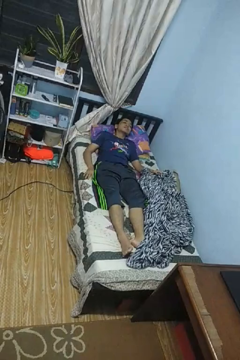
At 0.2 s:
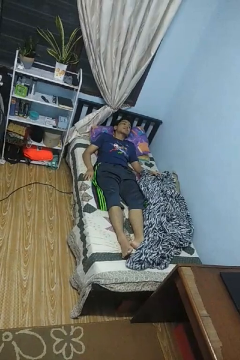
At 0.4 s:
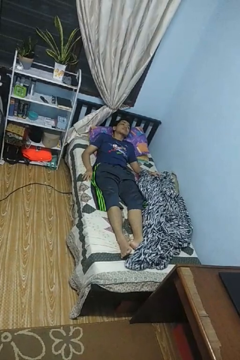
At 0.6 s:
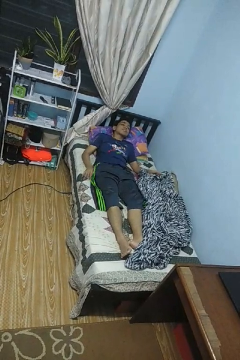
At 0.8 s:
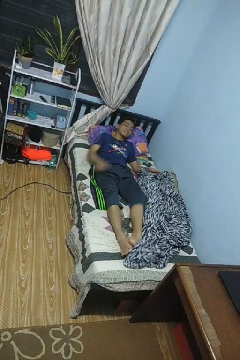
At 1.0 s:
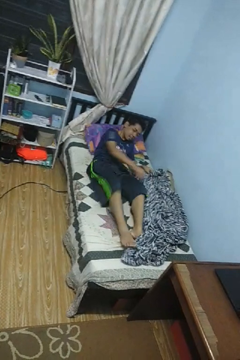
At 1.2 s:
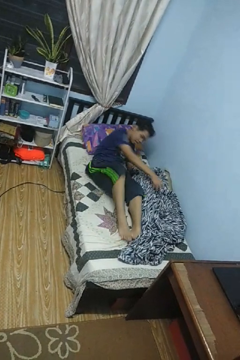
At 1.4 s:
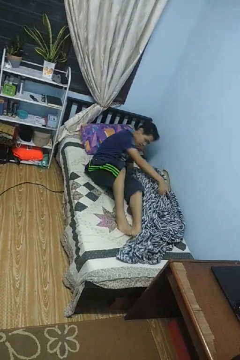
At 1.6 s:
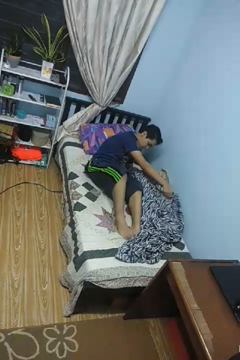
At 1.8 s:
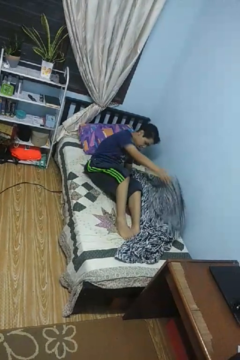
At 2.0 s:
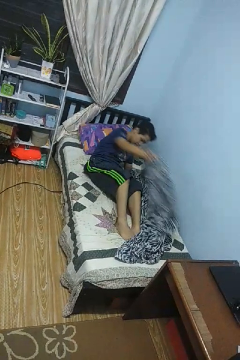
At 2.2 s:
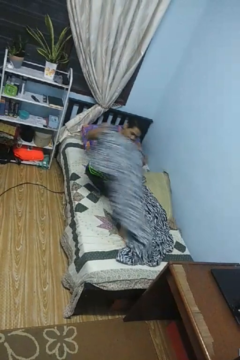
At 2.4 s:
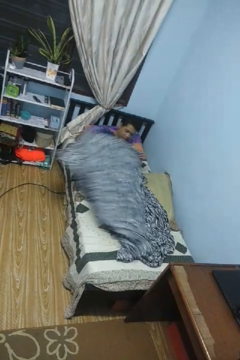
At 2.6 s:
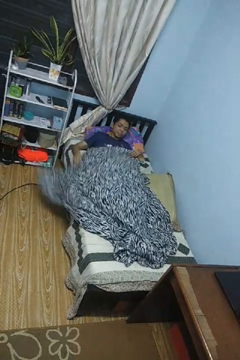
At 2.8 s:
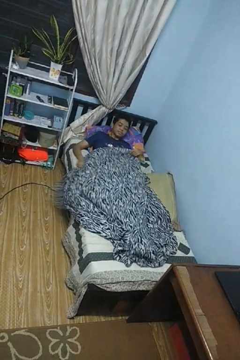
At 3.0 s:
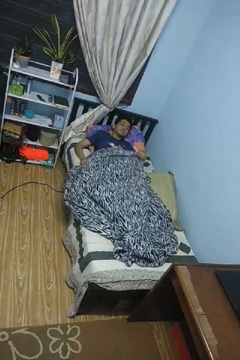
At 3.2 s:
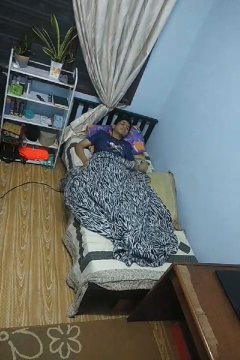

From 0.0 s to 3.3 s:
person covers with blanket

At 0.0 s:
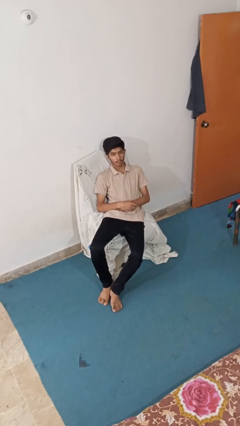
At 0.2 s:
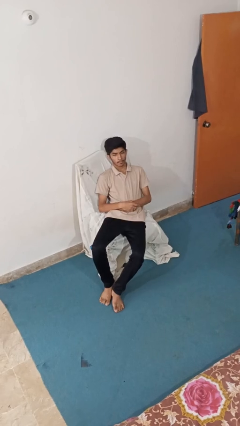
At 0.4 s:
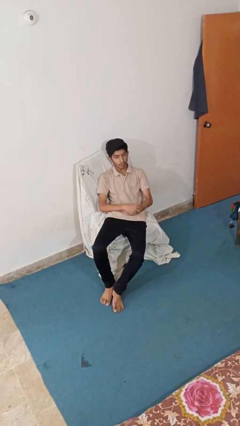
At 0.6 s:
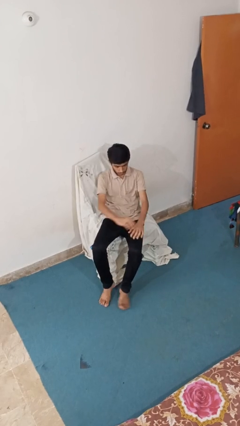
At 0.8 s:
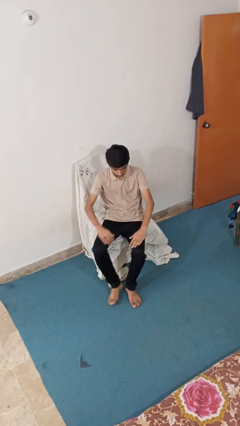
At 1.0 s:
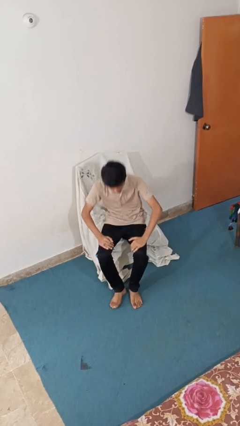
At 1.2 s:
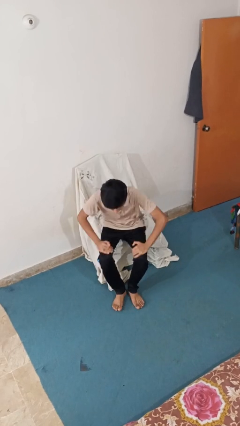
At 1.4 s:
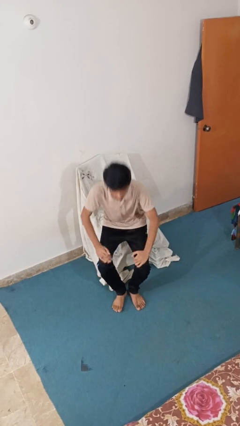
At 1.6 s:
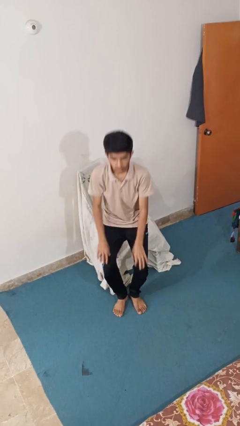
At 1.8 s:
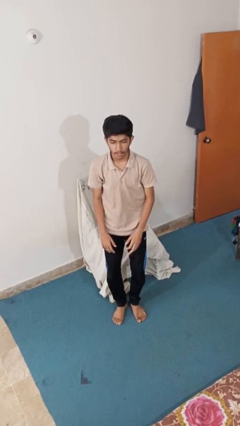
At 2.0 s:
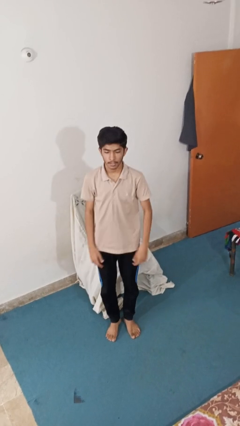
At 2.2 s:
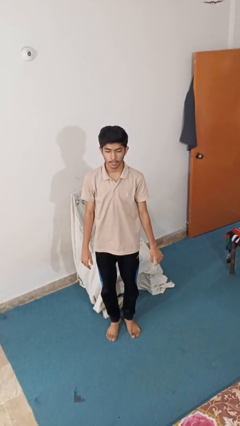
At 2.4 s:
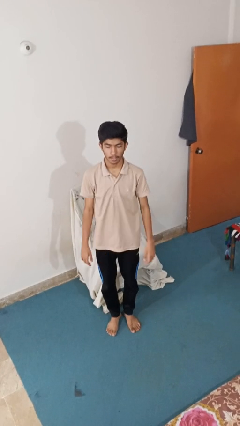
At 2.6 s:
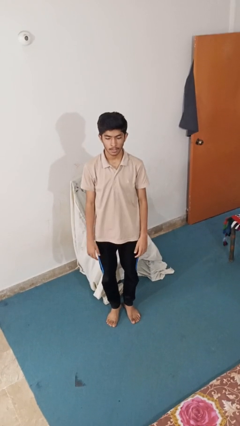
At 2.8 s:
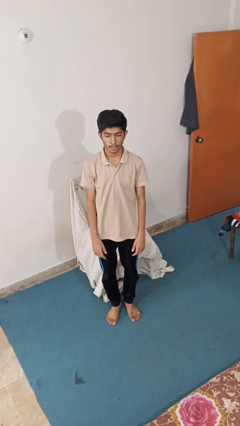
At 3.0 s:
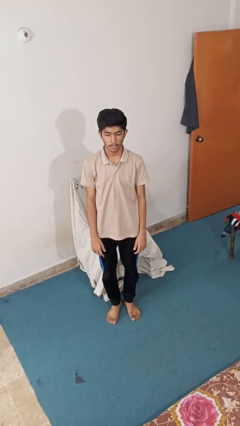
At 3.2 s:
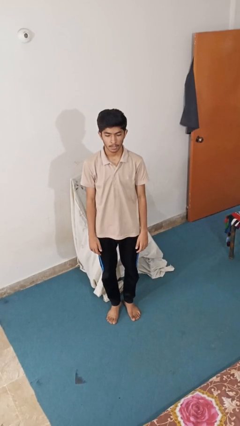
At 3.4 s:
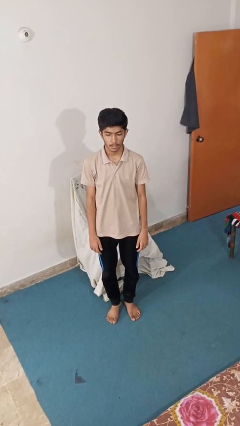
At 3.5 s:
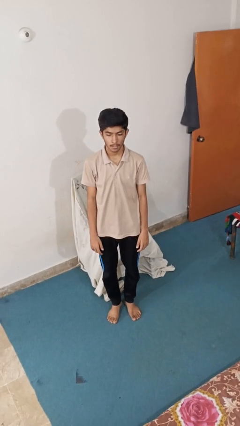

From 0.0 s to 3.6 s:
person stands up

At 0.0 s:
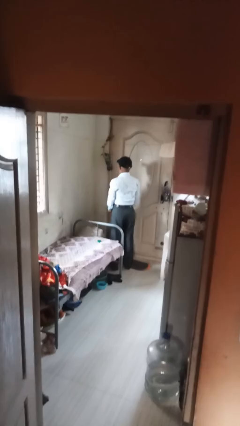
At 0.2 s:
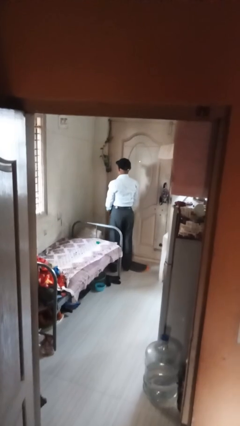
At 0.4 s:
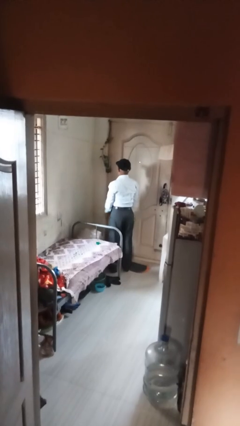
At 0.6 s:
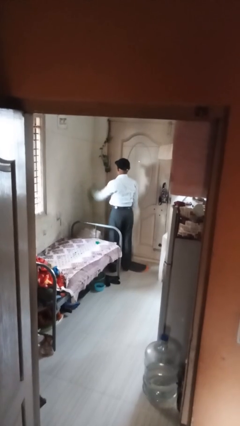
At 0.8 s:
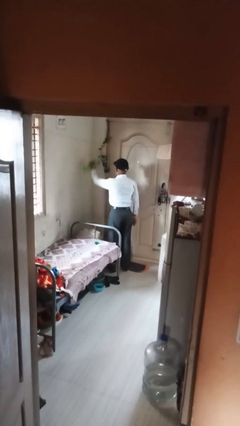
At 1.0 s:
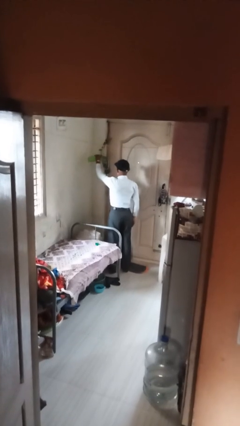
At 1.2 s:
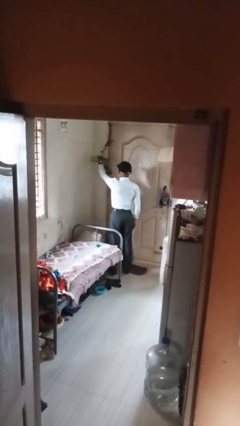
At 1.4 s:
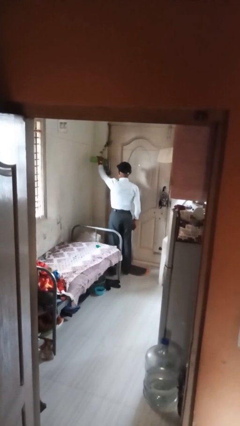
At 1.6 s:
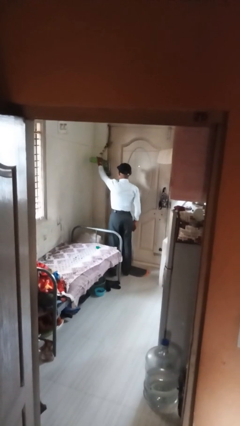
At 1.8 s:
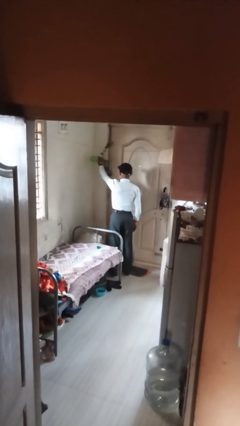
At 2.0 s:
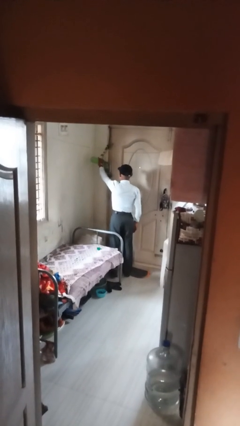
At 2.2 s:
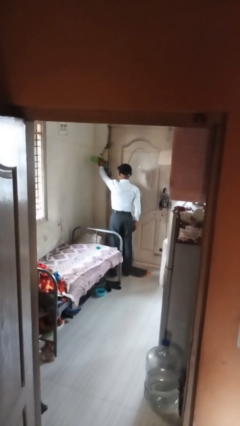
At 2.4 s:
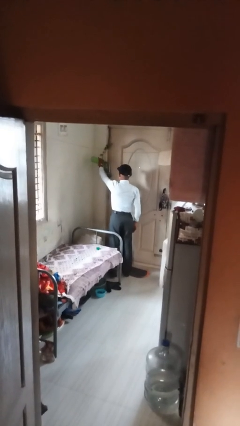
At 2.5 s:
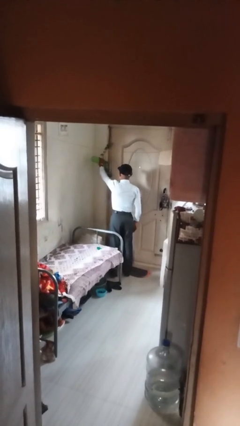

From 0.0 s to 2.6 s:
person waters houseplant

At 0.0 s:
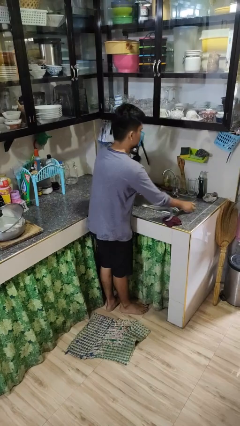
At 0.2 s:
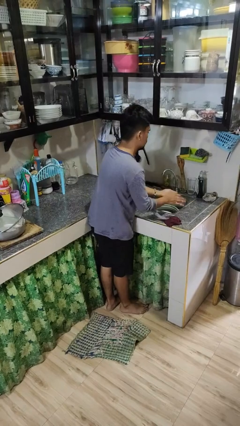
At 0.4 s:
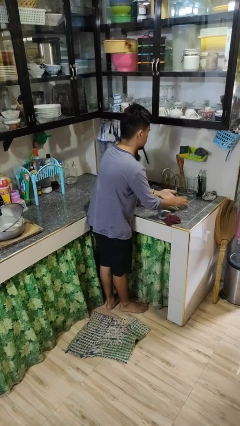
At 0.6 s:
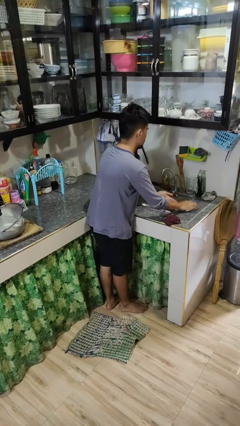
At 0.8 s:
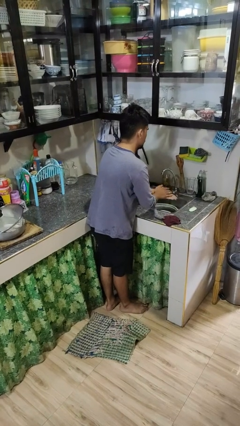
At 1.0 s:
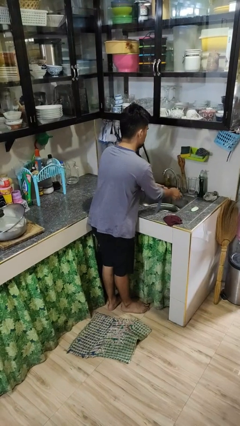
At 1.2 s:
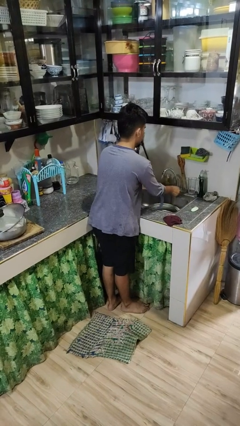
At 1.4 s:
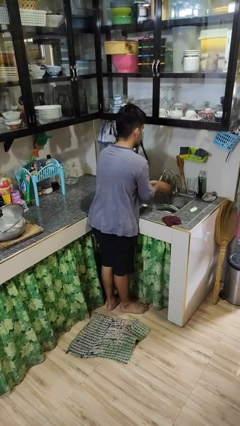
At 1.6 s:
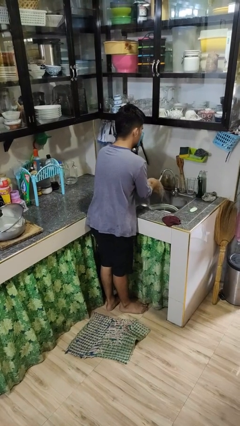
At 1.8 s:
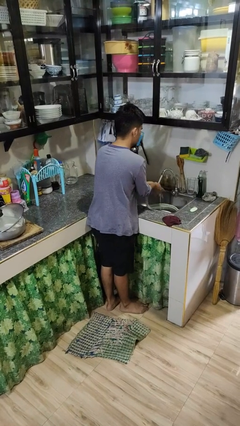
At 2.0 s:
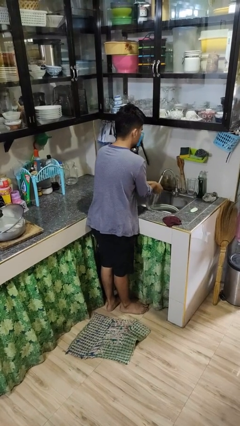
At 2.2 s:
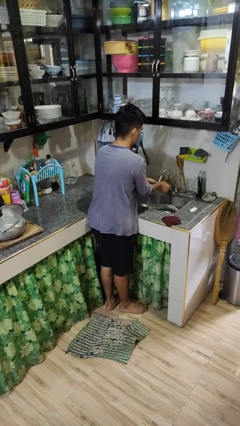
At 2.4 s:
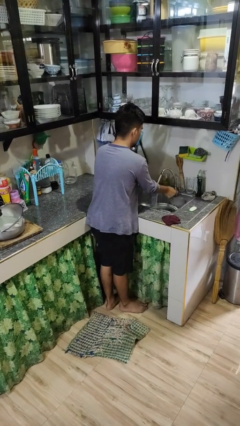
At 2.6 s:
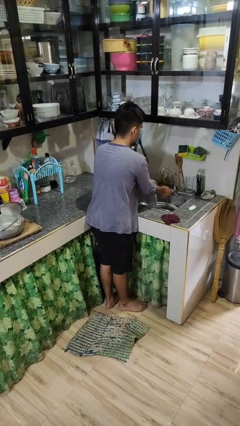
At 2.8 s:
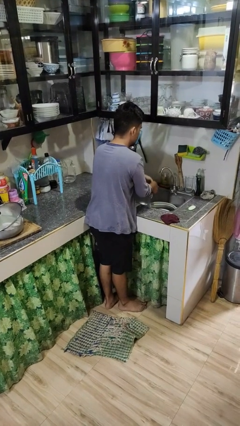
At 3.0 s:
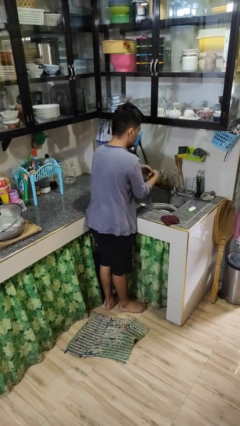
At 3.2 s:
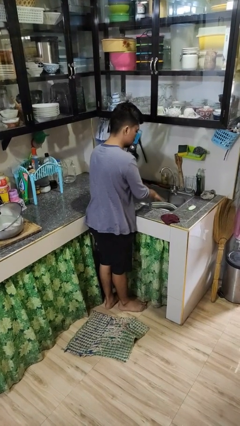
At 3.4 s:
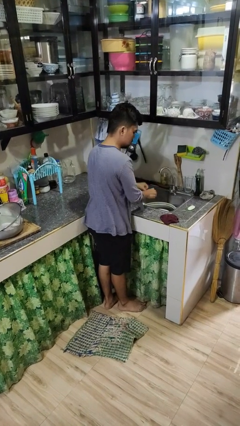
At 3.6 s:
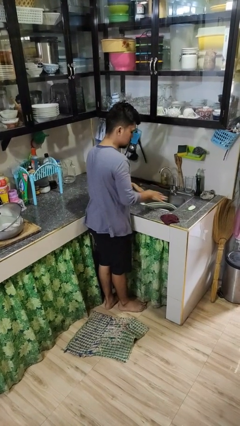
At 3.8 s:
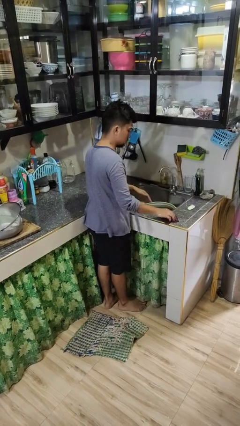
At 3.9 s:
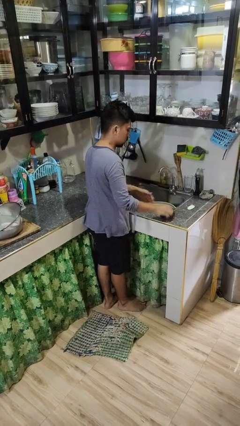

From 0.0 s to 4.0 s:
person washes hands

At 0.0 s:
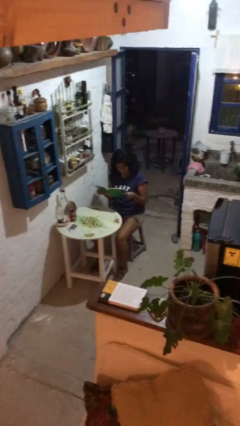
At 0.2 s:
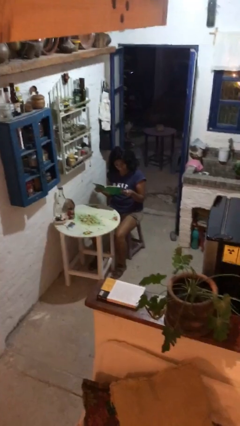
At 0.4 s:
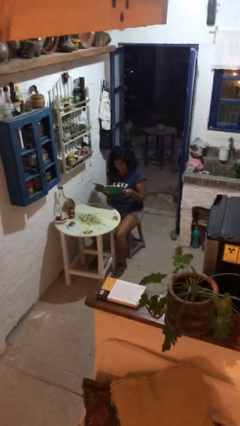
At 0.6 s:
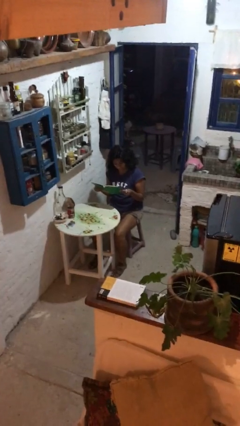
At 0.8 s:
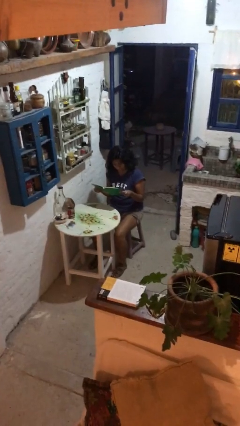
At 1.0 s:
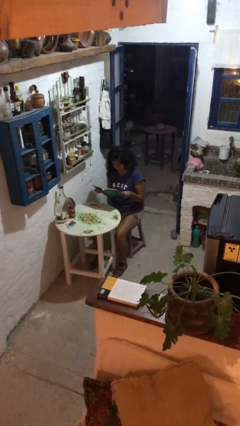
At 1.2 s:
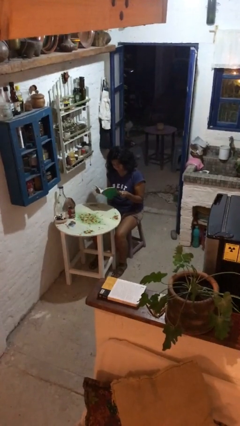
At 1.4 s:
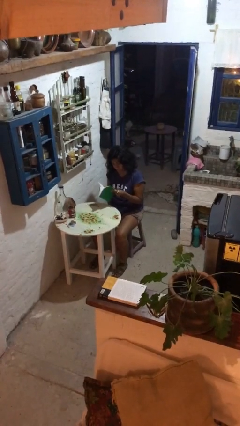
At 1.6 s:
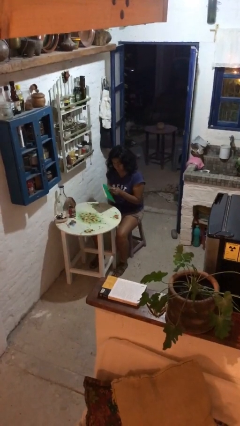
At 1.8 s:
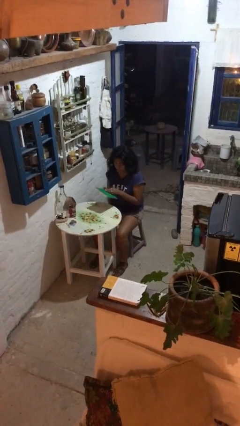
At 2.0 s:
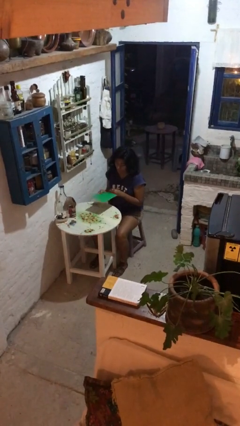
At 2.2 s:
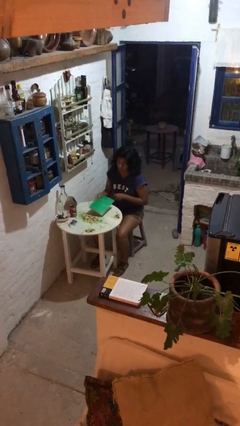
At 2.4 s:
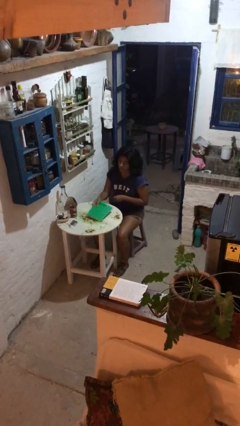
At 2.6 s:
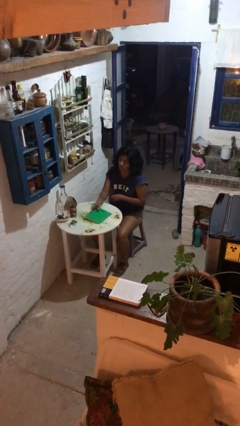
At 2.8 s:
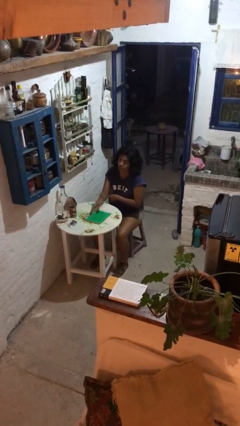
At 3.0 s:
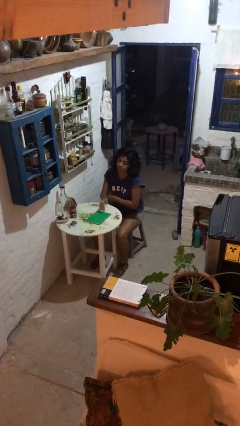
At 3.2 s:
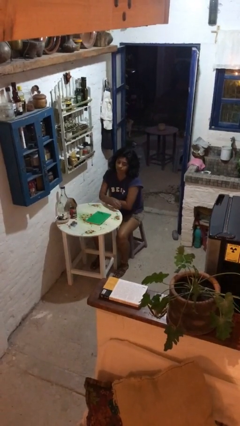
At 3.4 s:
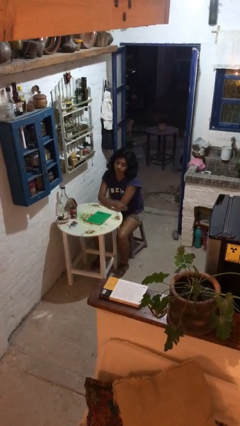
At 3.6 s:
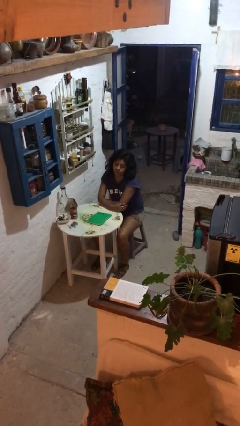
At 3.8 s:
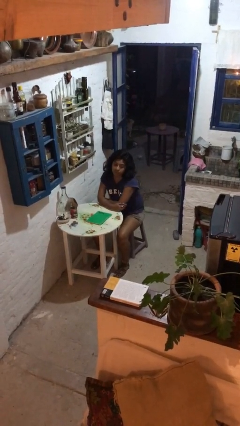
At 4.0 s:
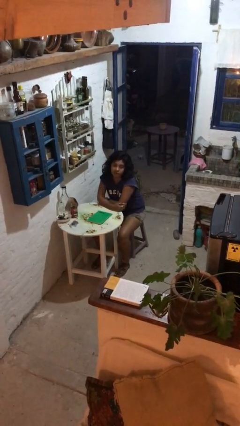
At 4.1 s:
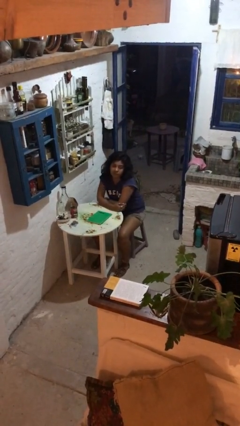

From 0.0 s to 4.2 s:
person puts down object on table

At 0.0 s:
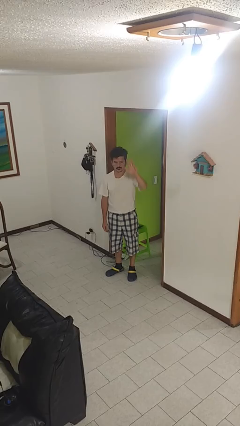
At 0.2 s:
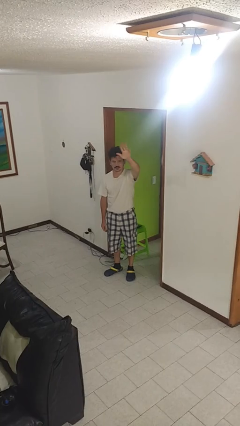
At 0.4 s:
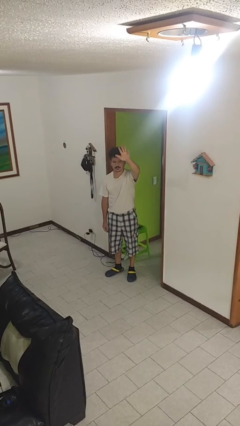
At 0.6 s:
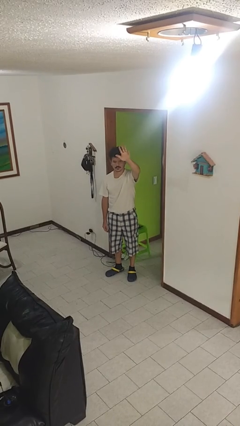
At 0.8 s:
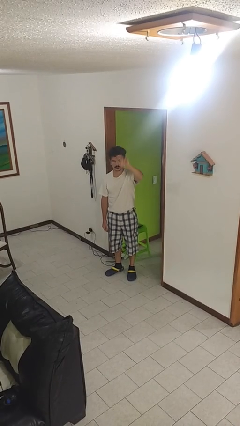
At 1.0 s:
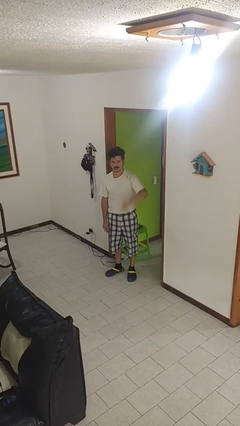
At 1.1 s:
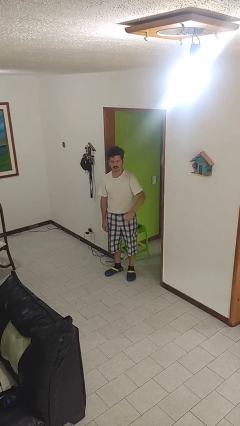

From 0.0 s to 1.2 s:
person gestures number four
